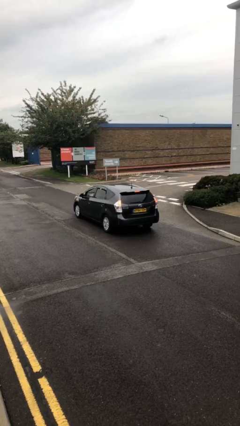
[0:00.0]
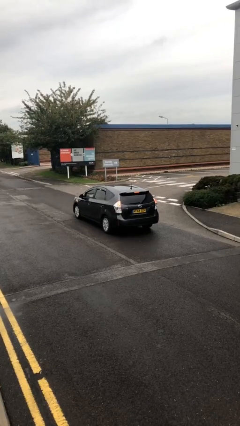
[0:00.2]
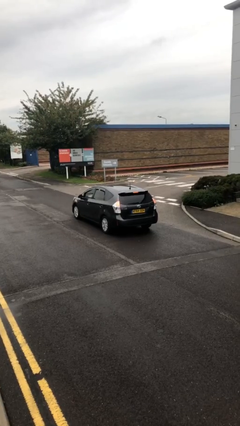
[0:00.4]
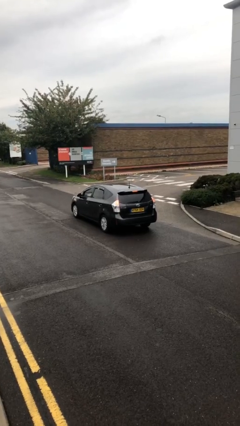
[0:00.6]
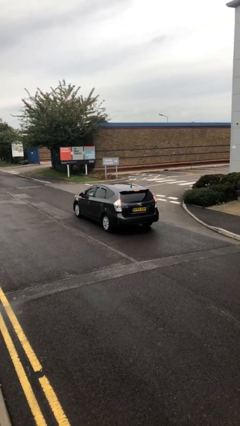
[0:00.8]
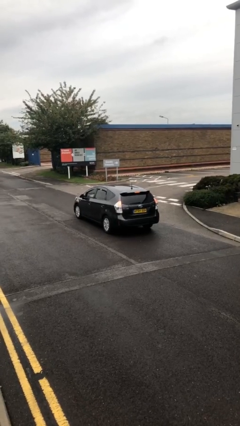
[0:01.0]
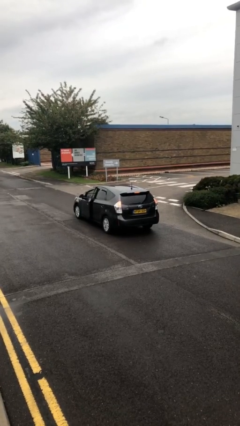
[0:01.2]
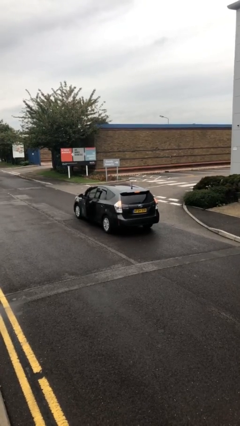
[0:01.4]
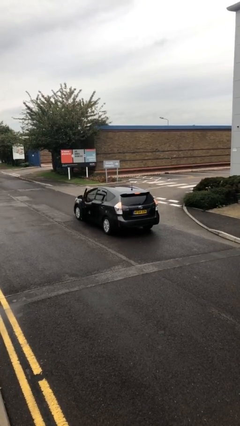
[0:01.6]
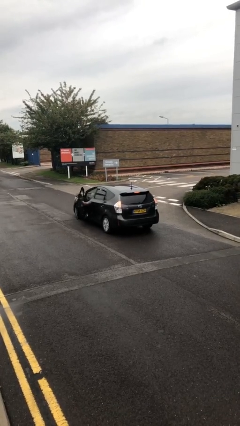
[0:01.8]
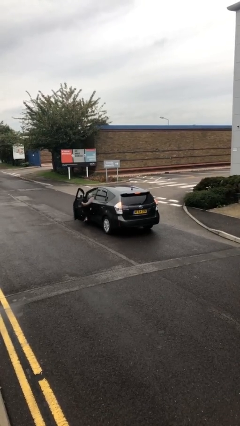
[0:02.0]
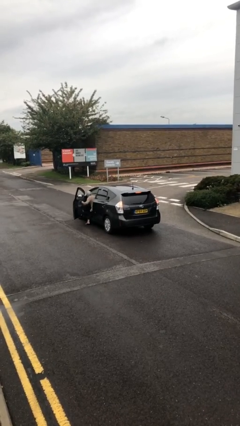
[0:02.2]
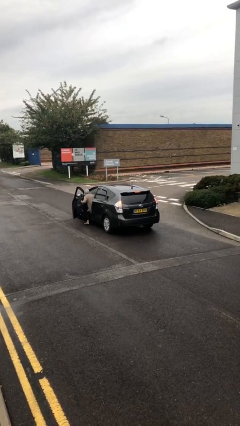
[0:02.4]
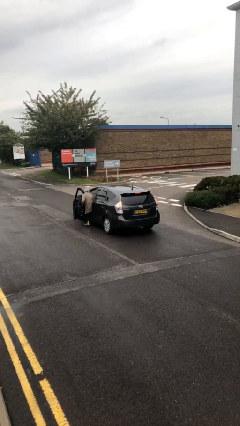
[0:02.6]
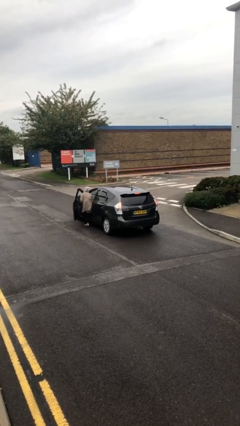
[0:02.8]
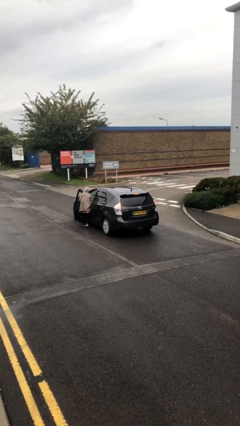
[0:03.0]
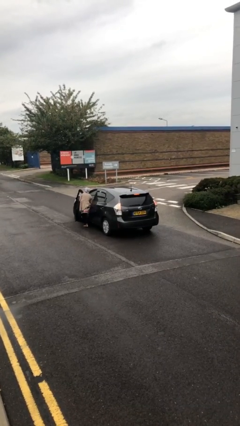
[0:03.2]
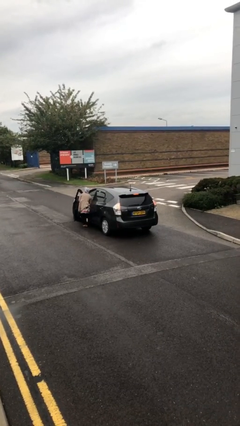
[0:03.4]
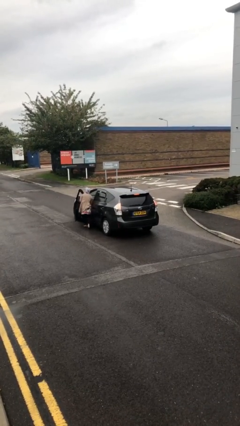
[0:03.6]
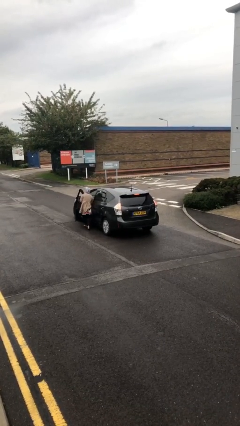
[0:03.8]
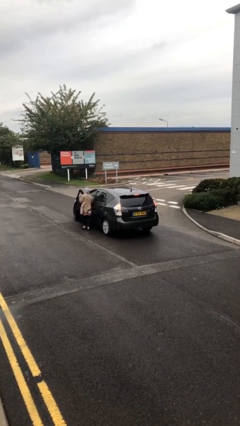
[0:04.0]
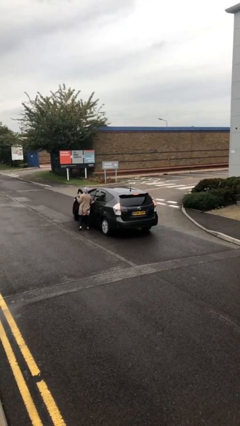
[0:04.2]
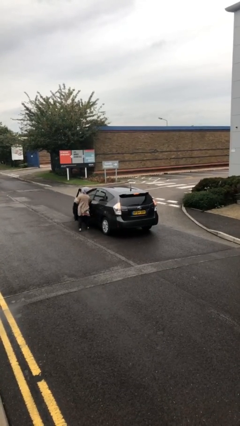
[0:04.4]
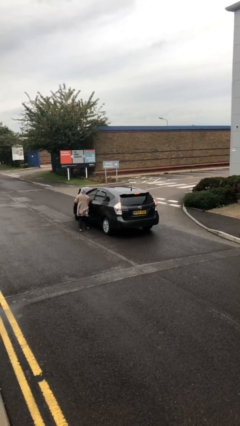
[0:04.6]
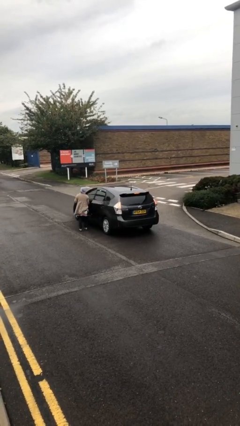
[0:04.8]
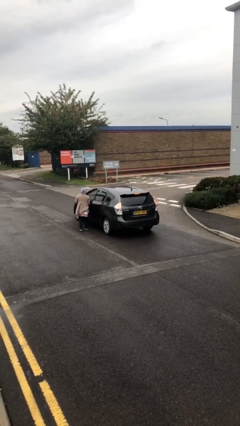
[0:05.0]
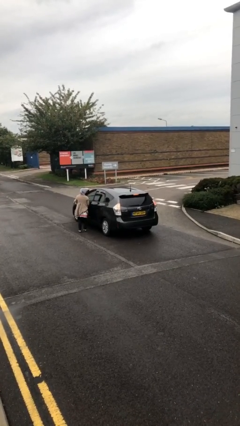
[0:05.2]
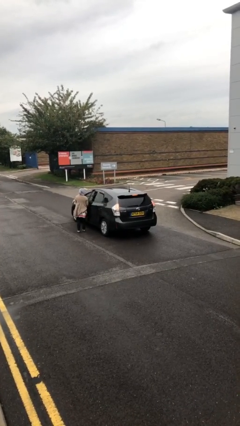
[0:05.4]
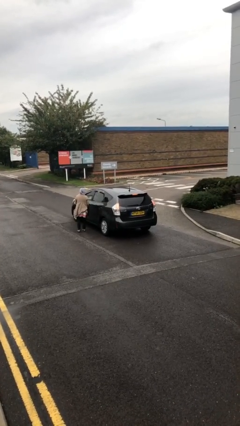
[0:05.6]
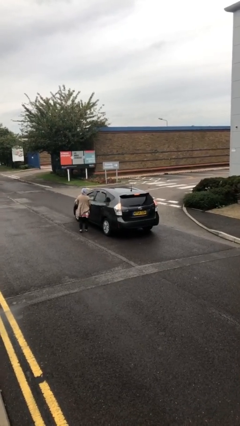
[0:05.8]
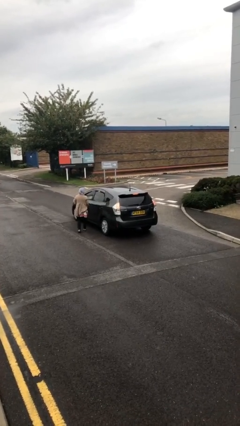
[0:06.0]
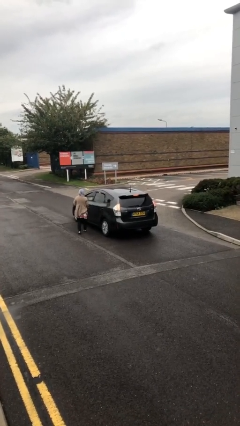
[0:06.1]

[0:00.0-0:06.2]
car drops off person

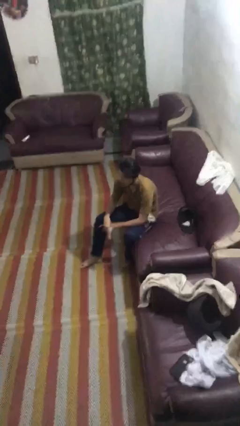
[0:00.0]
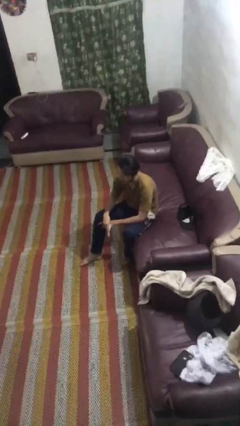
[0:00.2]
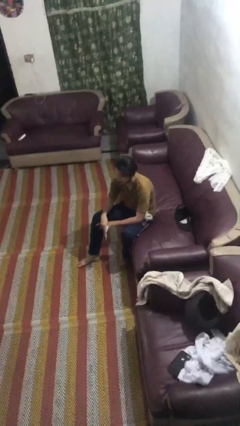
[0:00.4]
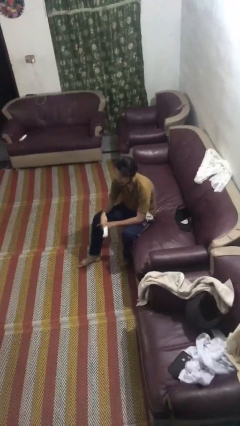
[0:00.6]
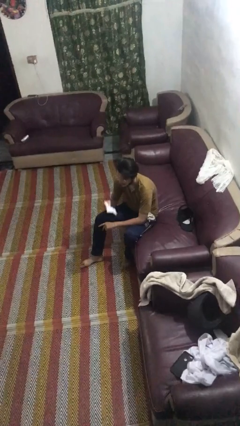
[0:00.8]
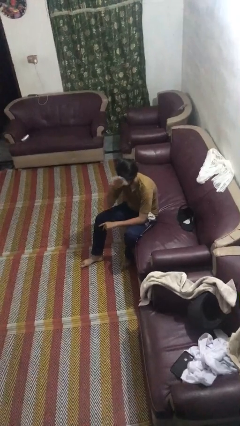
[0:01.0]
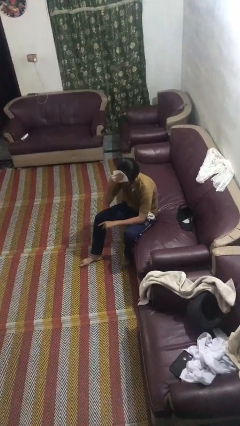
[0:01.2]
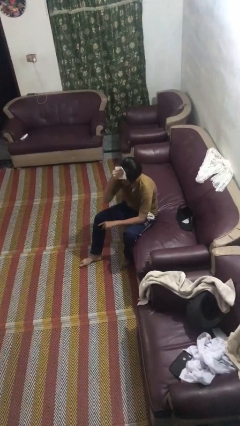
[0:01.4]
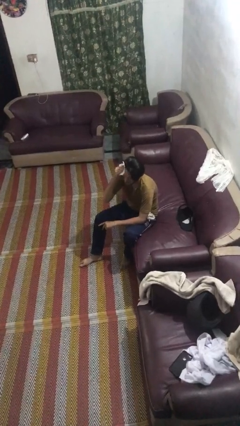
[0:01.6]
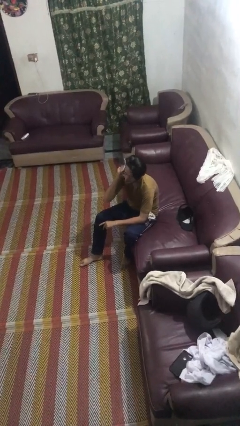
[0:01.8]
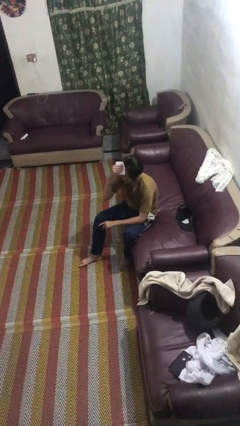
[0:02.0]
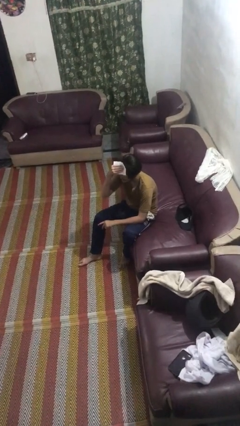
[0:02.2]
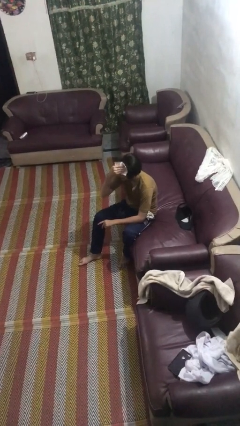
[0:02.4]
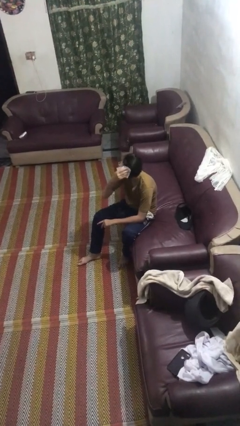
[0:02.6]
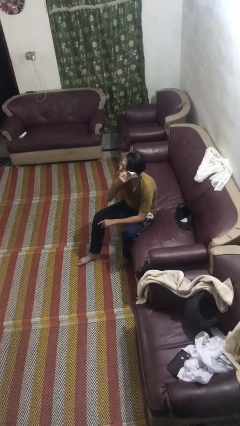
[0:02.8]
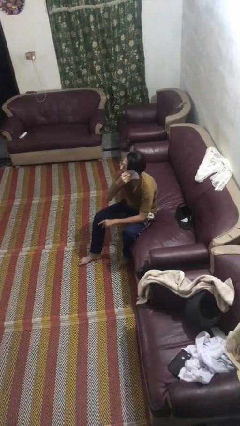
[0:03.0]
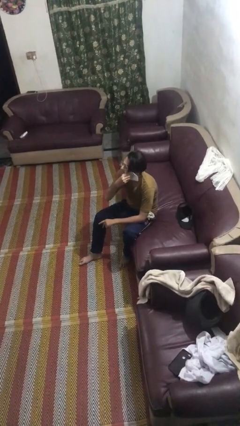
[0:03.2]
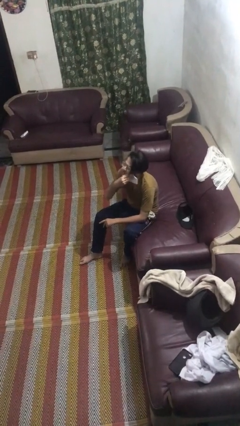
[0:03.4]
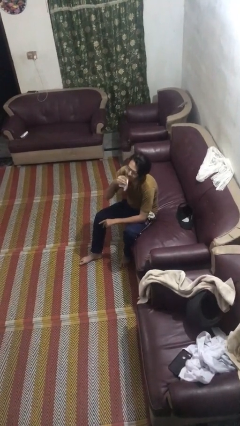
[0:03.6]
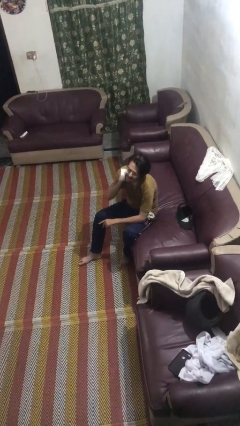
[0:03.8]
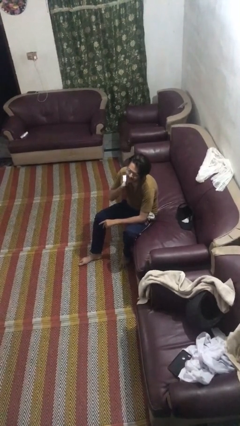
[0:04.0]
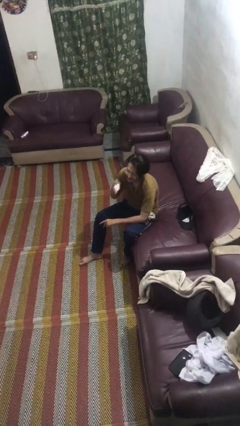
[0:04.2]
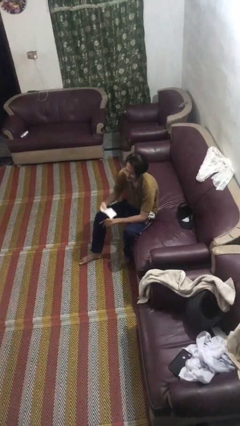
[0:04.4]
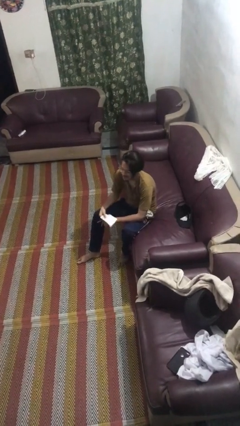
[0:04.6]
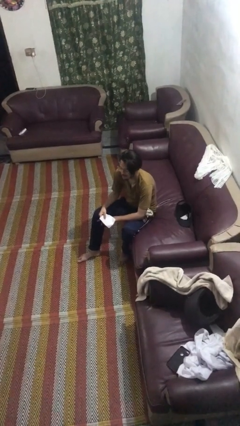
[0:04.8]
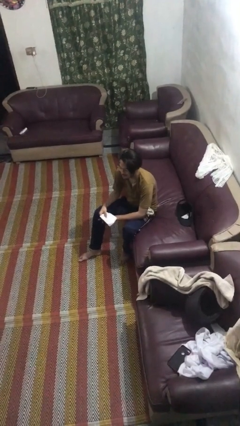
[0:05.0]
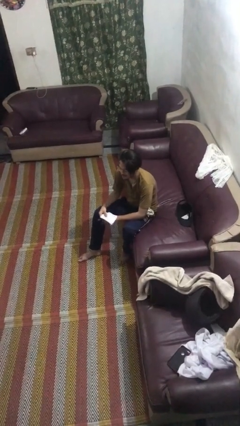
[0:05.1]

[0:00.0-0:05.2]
person wipes mouth with napkin

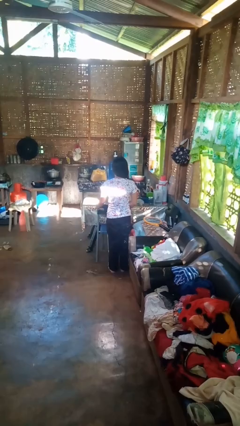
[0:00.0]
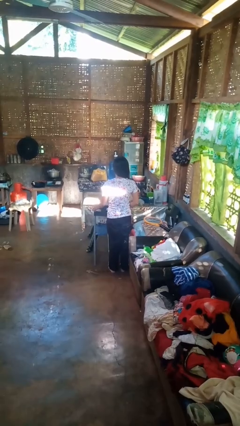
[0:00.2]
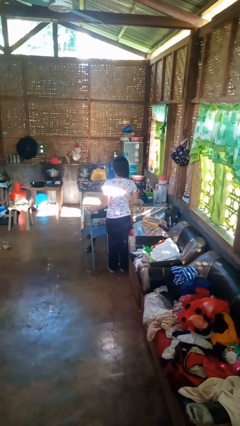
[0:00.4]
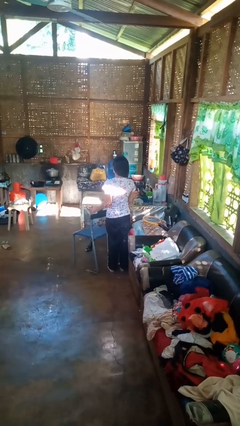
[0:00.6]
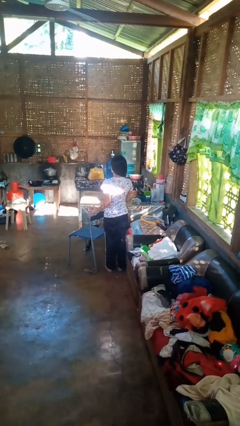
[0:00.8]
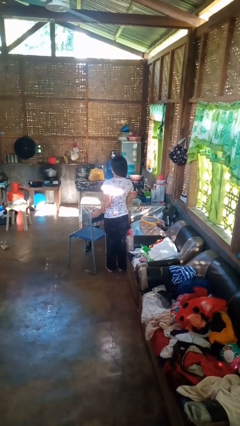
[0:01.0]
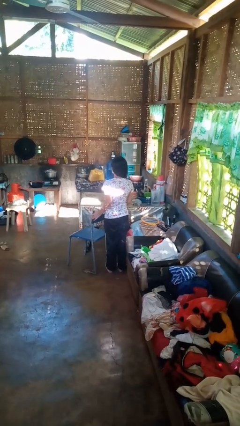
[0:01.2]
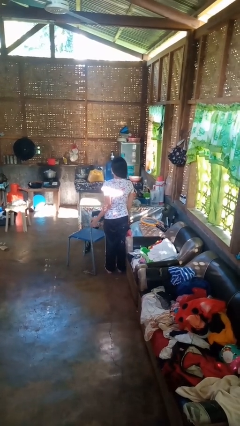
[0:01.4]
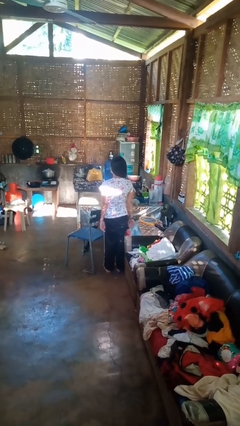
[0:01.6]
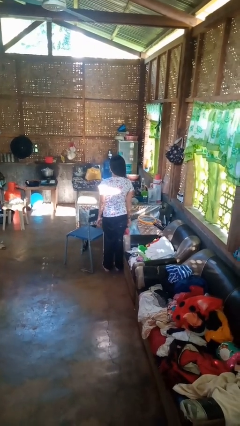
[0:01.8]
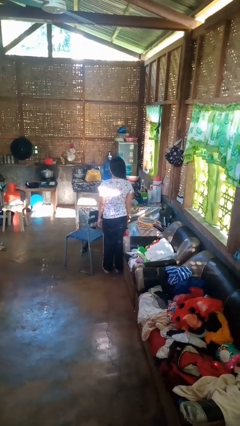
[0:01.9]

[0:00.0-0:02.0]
person pulls out chair

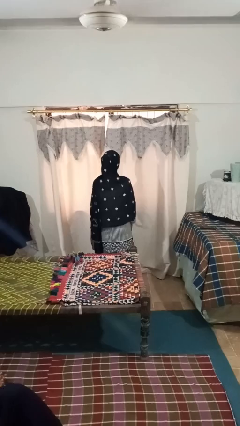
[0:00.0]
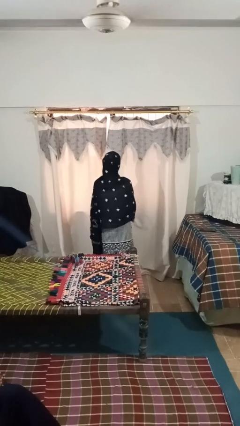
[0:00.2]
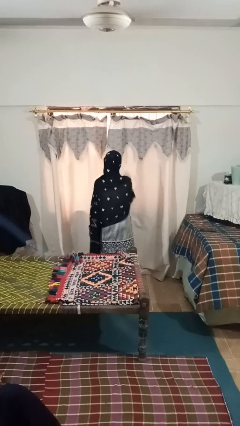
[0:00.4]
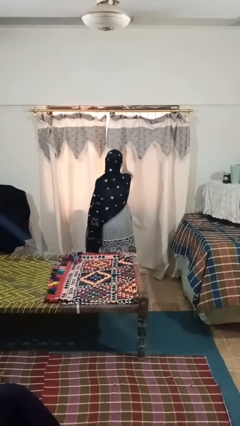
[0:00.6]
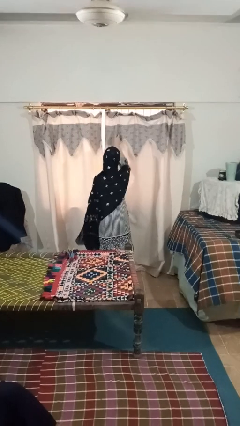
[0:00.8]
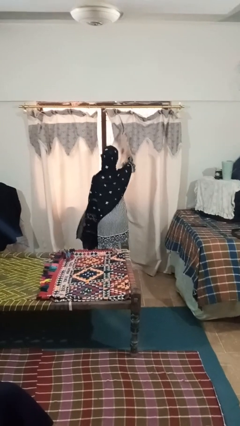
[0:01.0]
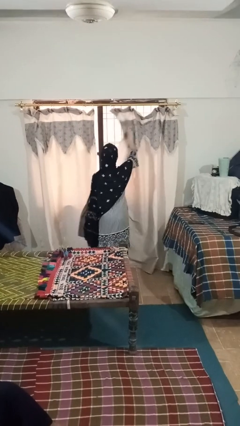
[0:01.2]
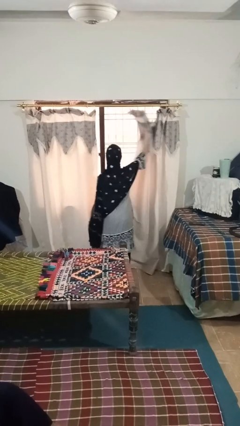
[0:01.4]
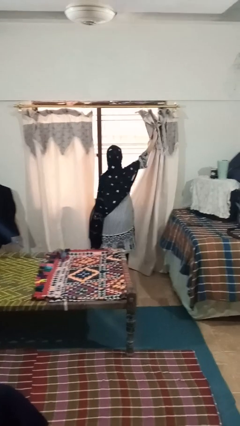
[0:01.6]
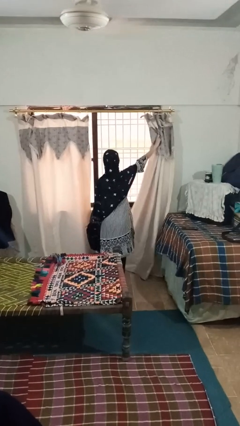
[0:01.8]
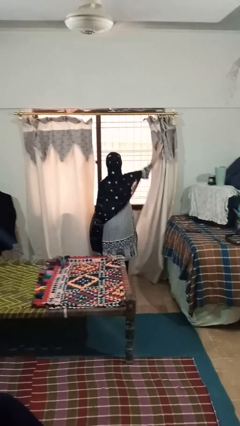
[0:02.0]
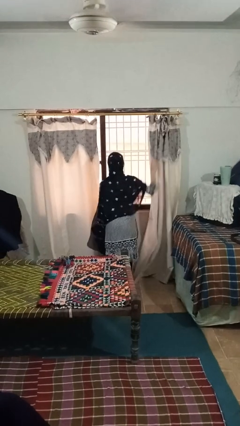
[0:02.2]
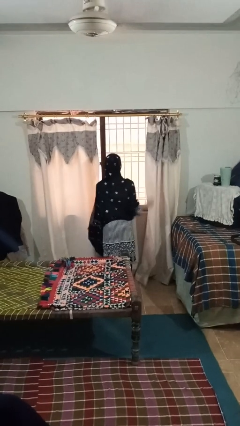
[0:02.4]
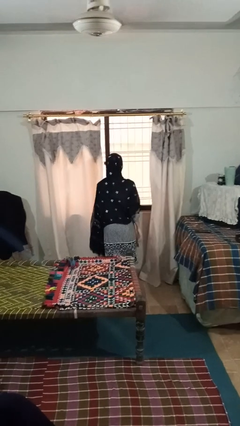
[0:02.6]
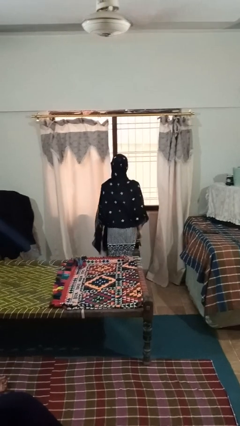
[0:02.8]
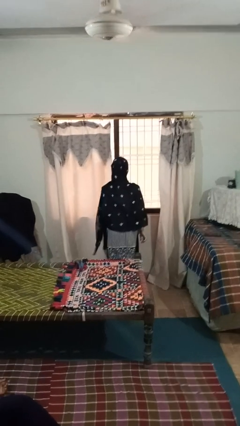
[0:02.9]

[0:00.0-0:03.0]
person opens curtains

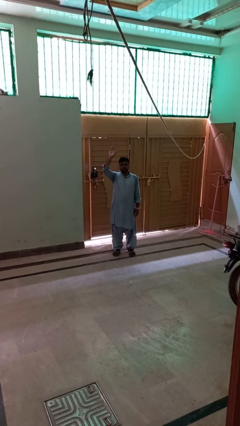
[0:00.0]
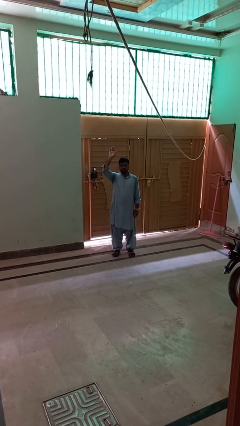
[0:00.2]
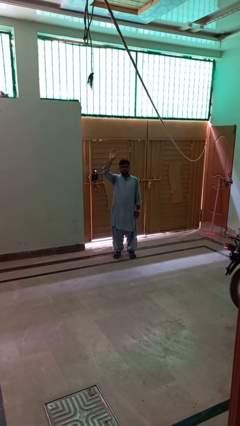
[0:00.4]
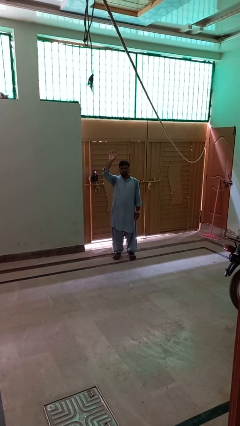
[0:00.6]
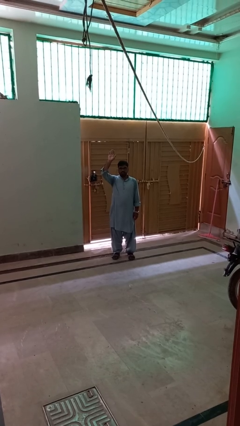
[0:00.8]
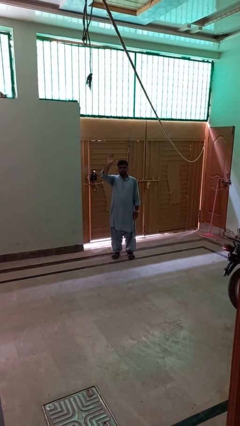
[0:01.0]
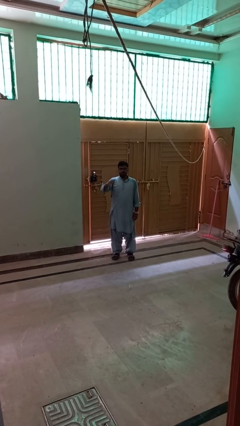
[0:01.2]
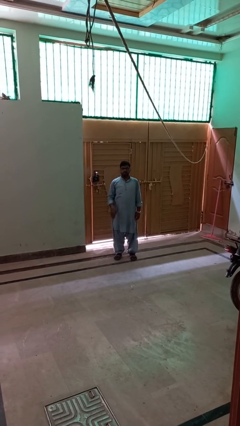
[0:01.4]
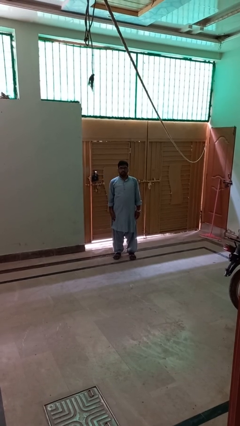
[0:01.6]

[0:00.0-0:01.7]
person gestures lower hand
